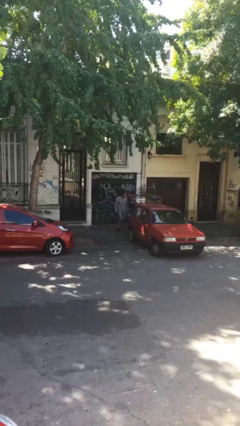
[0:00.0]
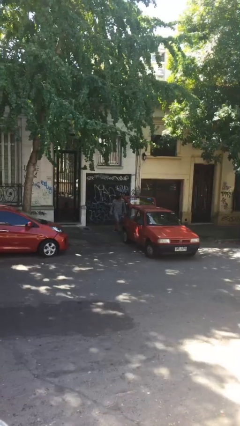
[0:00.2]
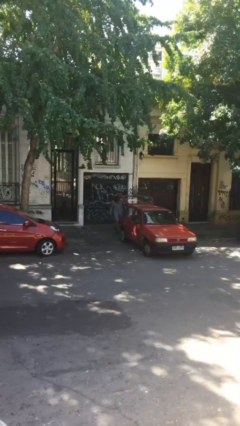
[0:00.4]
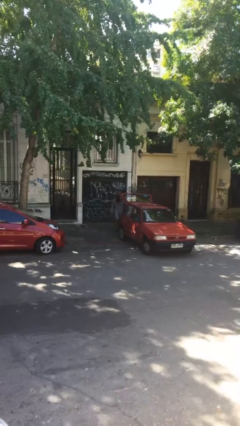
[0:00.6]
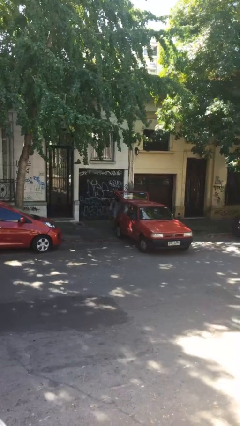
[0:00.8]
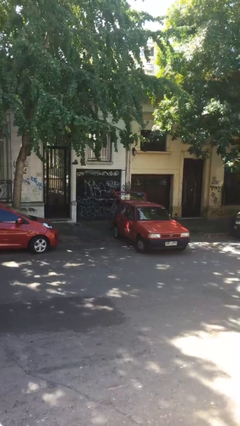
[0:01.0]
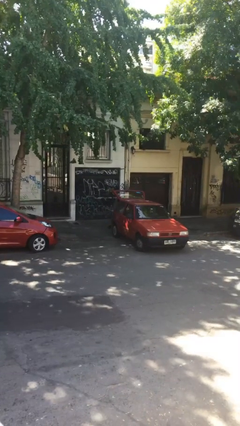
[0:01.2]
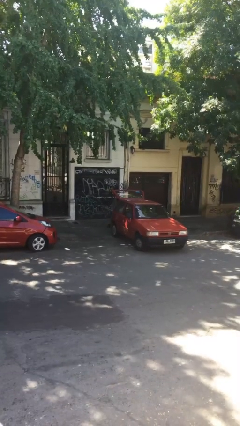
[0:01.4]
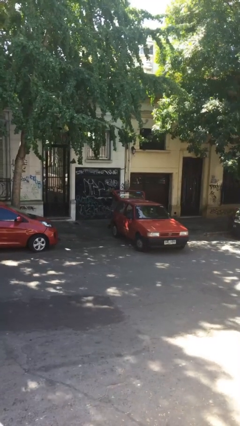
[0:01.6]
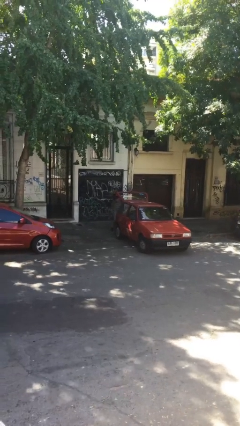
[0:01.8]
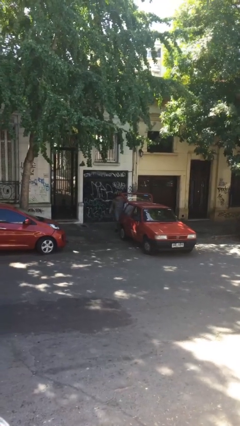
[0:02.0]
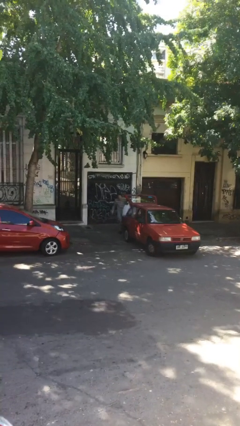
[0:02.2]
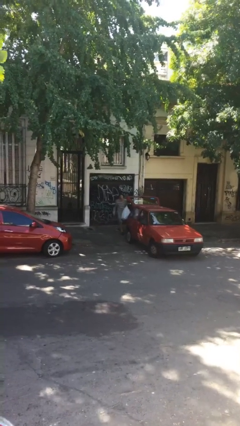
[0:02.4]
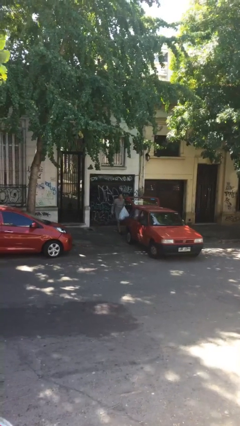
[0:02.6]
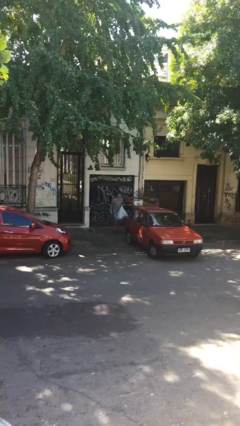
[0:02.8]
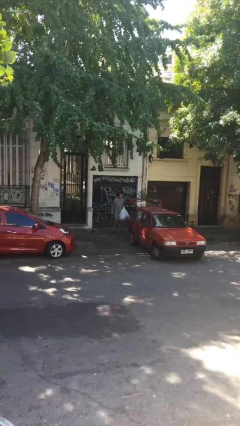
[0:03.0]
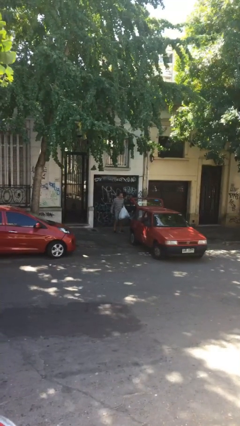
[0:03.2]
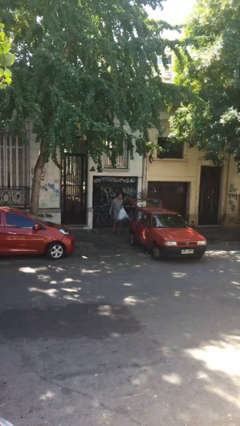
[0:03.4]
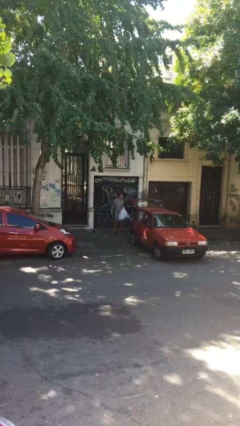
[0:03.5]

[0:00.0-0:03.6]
person unloads car

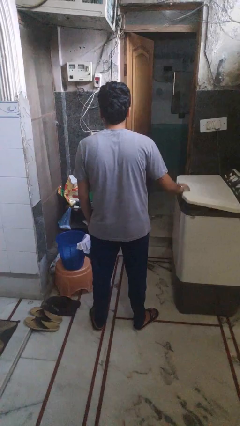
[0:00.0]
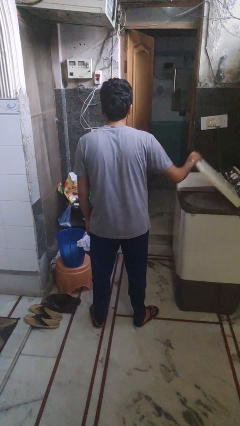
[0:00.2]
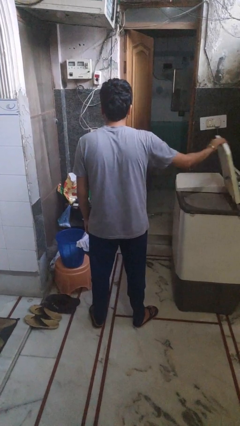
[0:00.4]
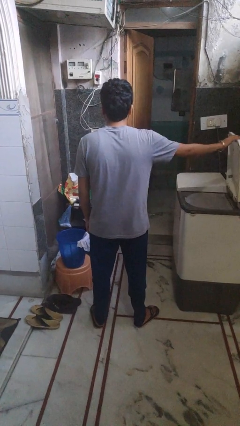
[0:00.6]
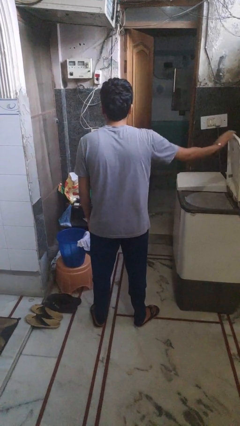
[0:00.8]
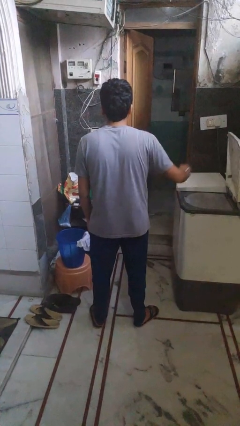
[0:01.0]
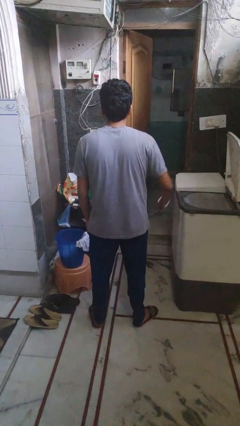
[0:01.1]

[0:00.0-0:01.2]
person opens clothes washer

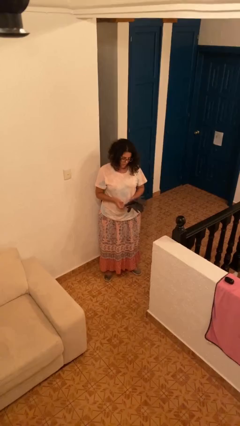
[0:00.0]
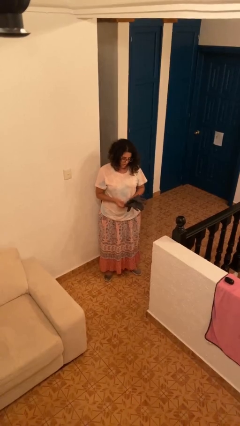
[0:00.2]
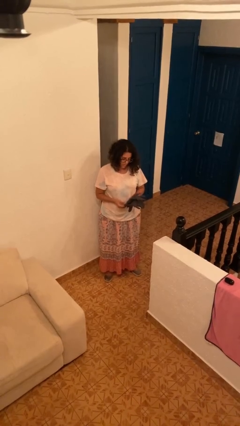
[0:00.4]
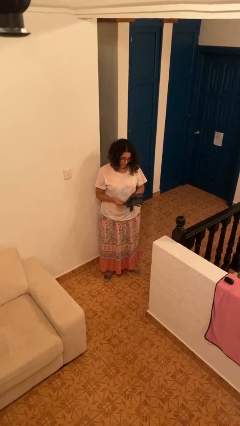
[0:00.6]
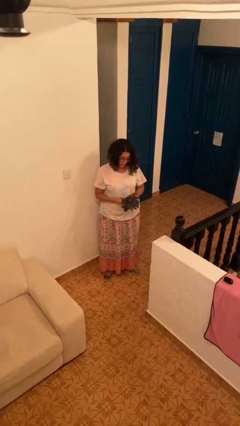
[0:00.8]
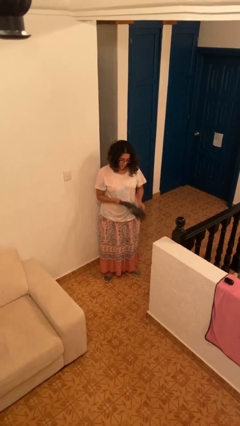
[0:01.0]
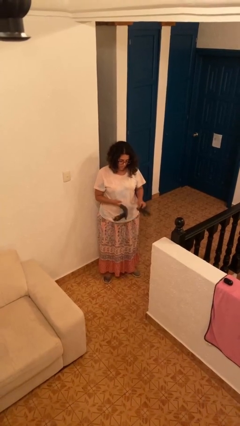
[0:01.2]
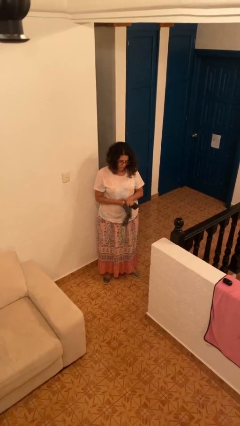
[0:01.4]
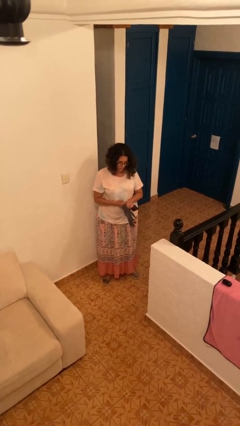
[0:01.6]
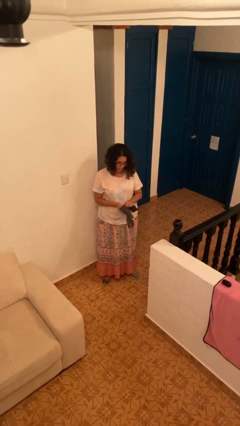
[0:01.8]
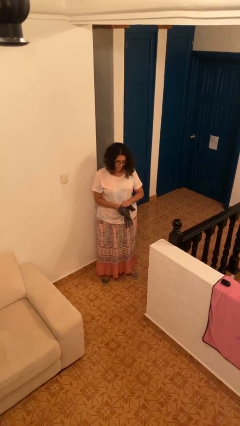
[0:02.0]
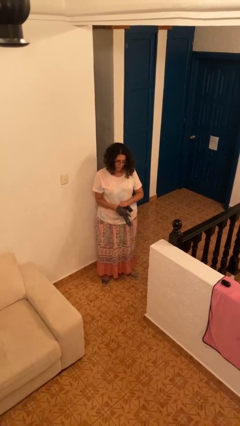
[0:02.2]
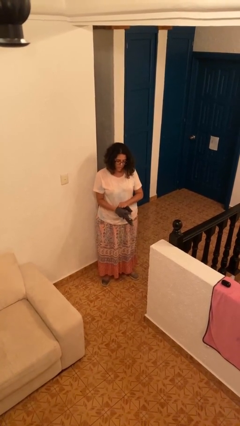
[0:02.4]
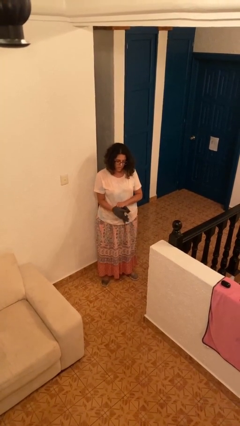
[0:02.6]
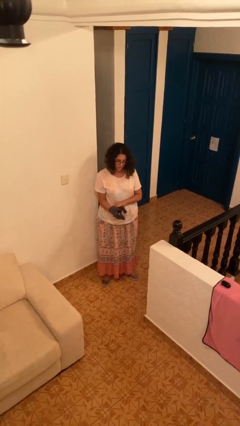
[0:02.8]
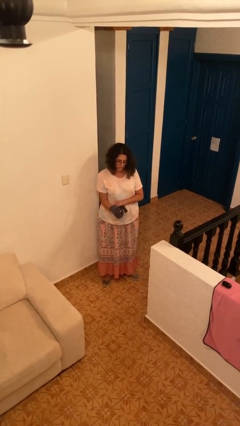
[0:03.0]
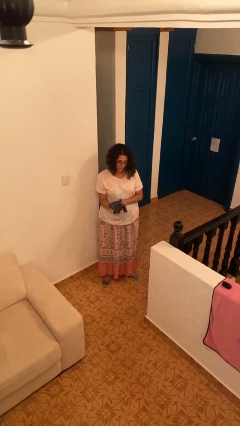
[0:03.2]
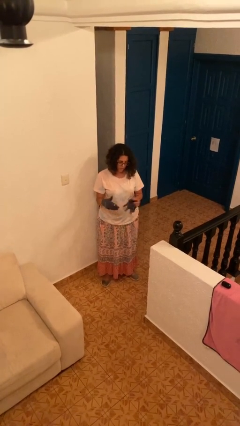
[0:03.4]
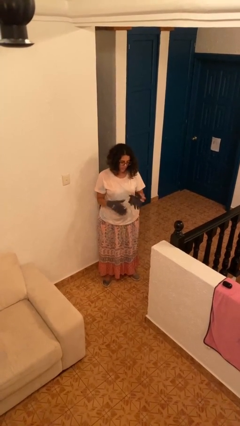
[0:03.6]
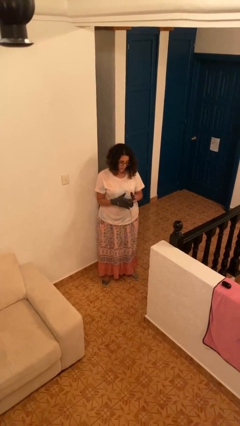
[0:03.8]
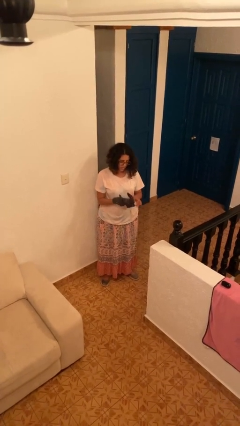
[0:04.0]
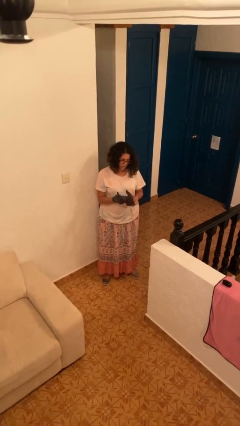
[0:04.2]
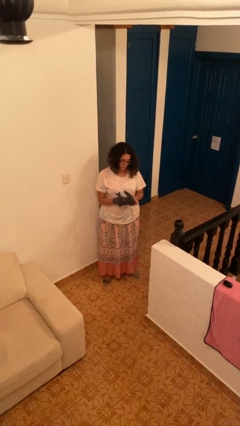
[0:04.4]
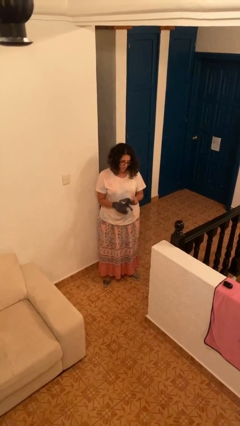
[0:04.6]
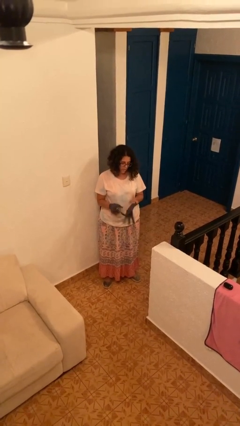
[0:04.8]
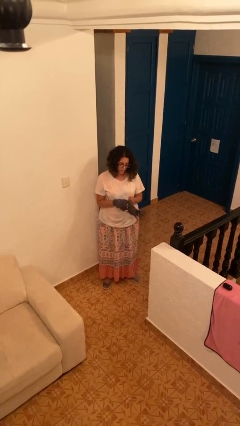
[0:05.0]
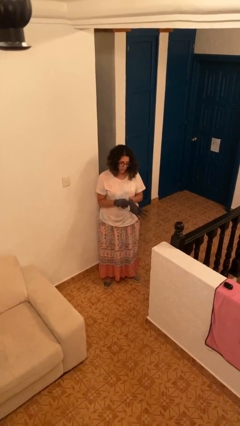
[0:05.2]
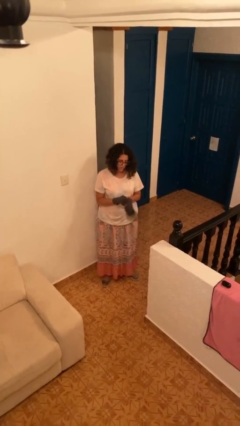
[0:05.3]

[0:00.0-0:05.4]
person puts on gloves

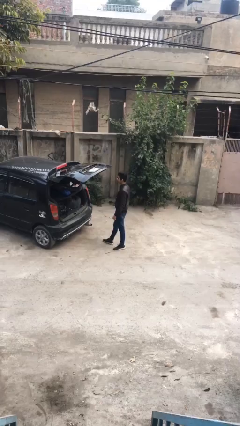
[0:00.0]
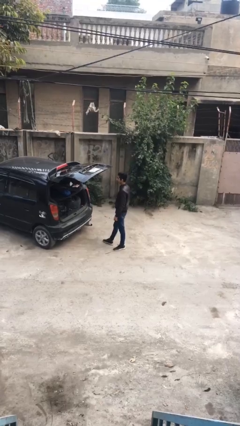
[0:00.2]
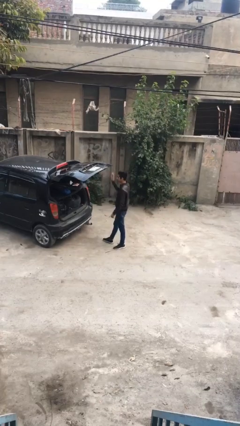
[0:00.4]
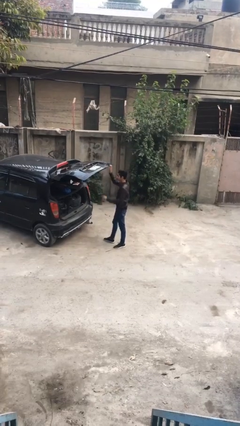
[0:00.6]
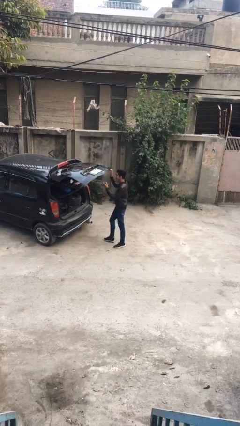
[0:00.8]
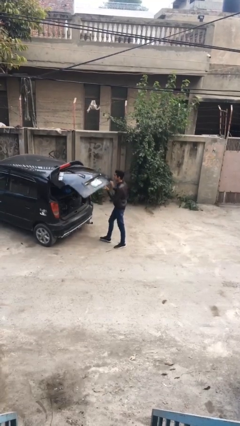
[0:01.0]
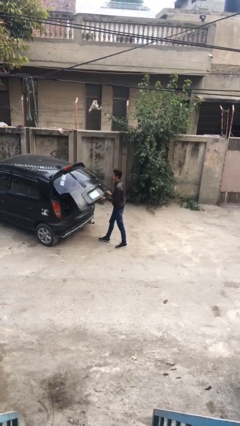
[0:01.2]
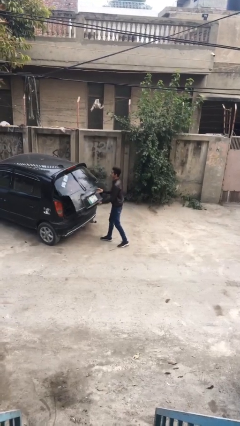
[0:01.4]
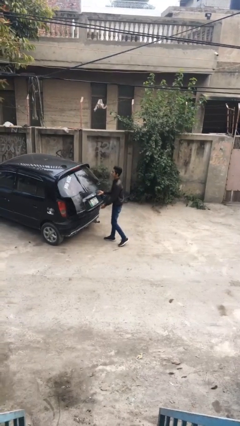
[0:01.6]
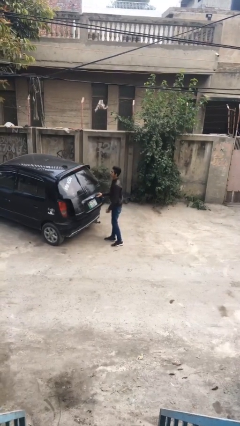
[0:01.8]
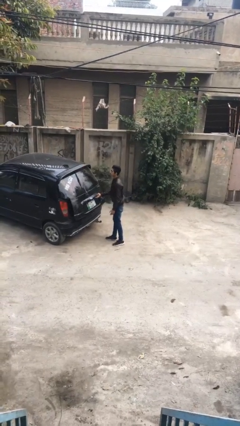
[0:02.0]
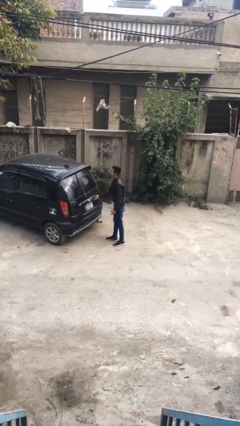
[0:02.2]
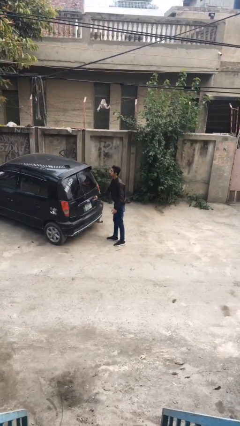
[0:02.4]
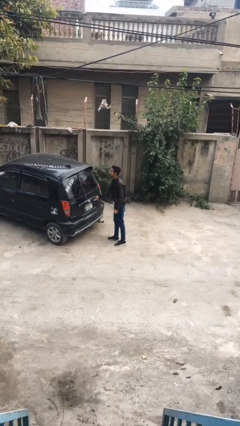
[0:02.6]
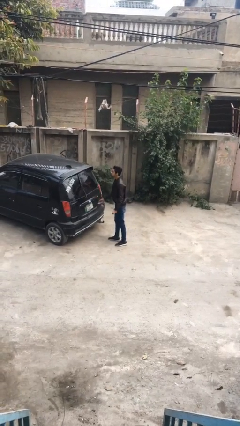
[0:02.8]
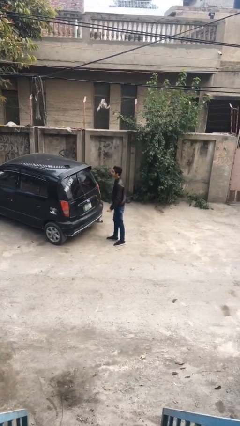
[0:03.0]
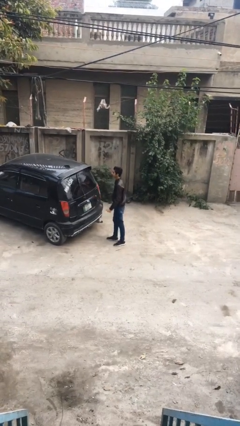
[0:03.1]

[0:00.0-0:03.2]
person closes car trunk

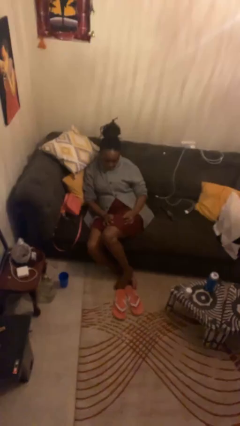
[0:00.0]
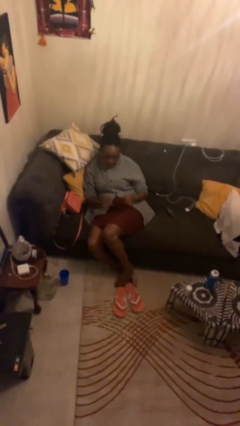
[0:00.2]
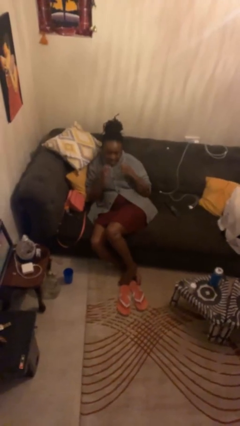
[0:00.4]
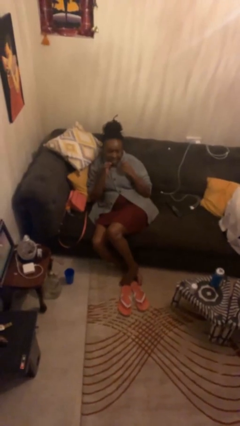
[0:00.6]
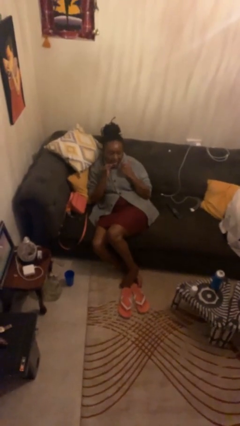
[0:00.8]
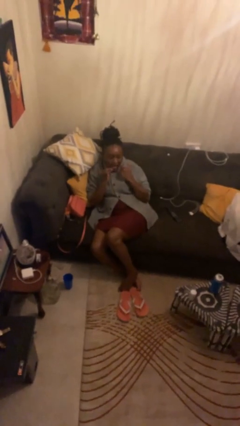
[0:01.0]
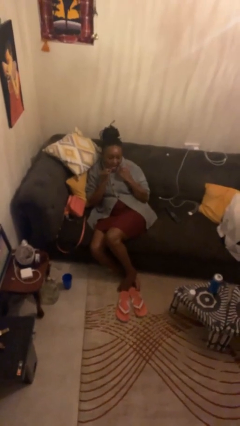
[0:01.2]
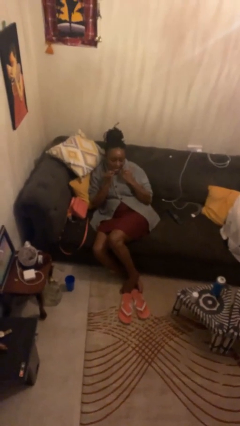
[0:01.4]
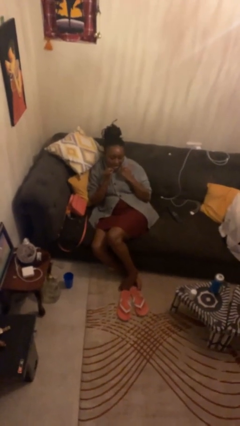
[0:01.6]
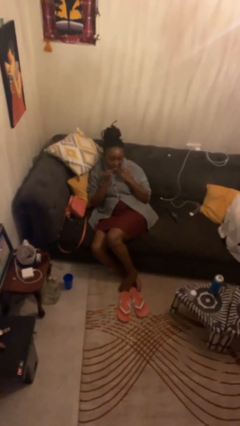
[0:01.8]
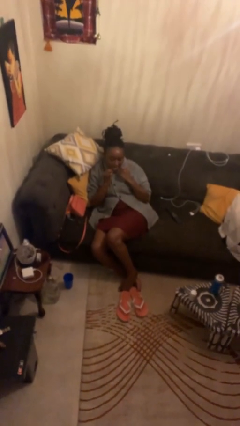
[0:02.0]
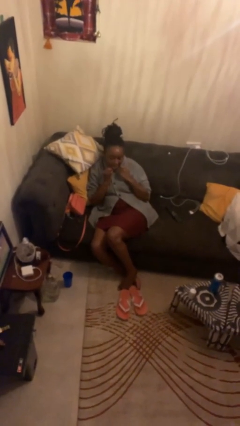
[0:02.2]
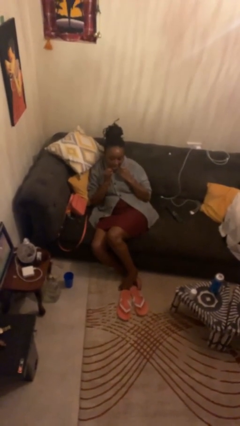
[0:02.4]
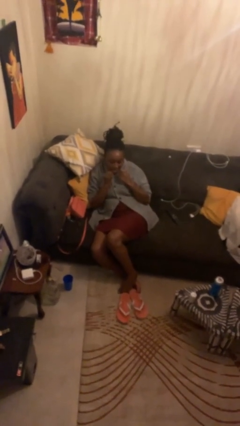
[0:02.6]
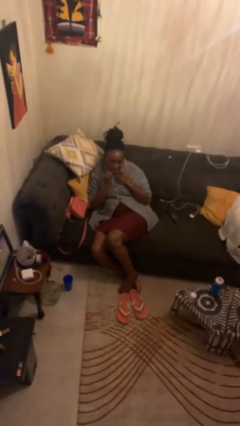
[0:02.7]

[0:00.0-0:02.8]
person flosses

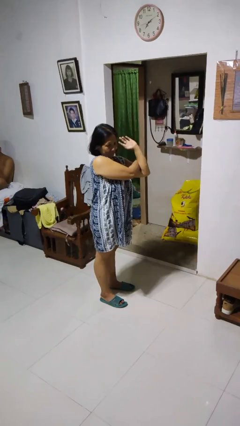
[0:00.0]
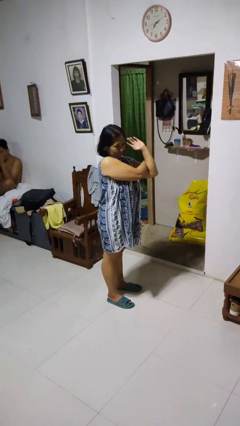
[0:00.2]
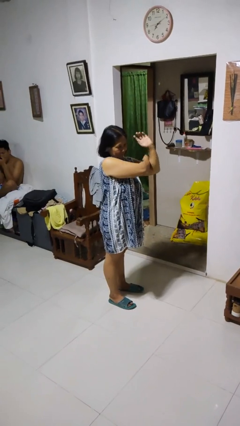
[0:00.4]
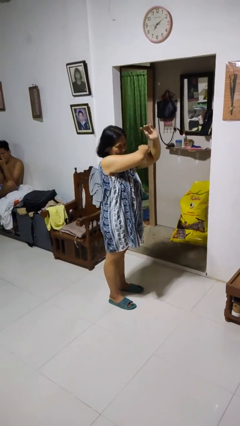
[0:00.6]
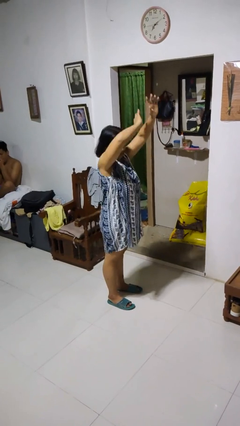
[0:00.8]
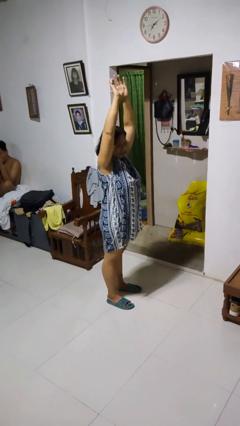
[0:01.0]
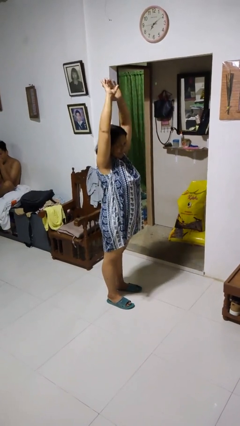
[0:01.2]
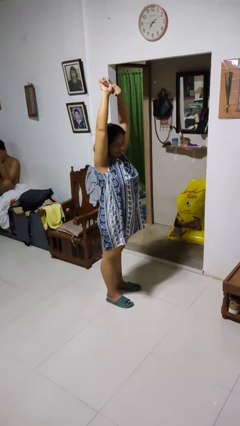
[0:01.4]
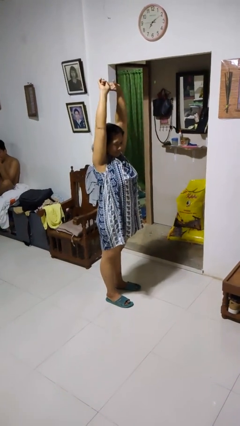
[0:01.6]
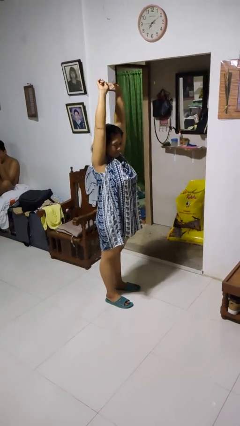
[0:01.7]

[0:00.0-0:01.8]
person stretches arms over head
